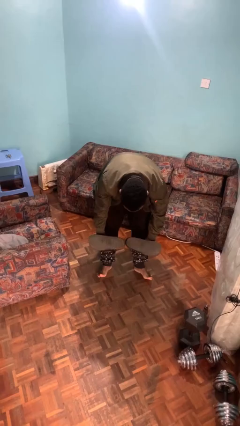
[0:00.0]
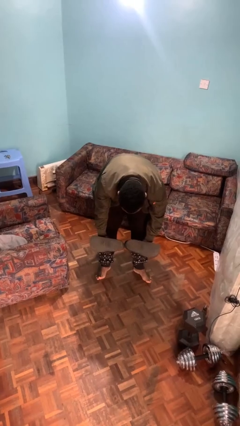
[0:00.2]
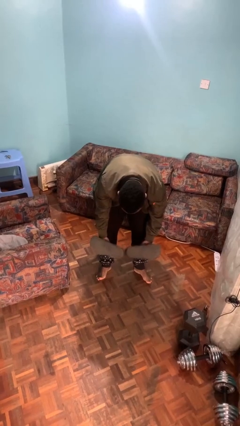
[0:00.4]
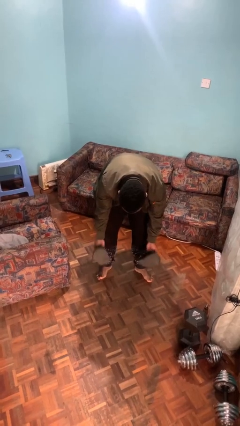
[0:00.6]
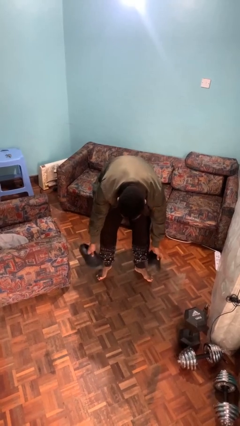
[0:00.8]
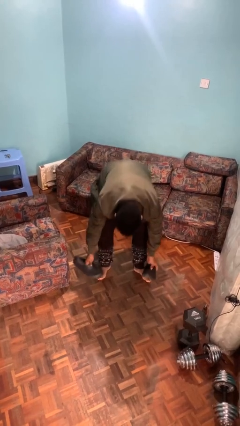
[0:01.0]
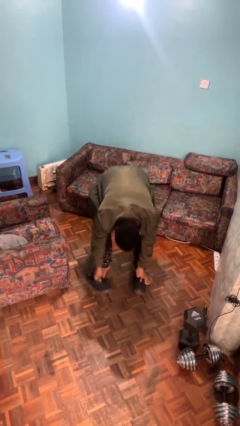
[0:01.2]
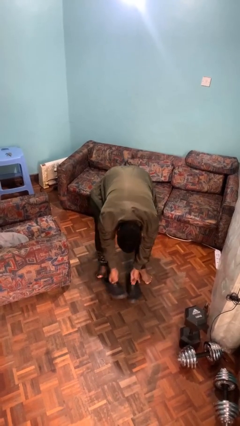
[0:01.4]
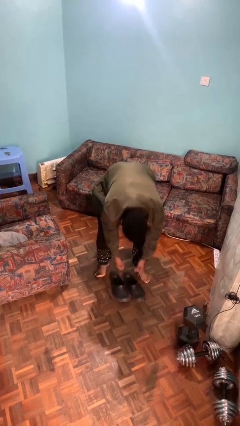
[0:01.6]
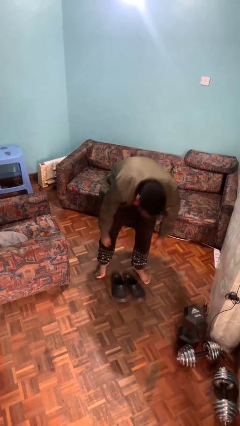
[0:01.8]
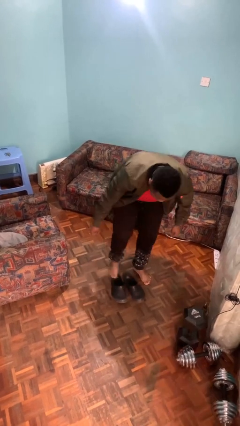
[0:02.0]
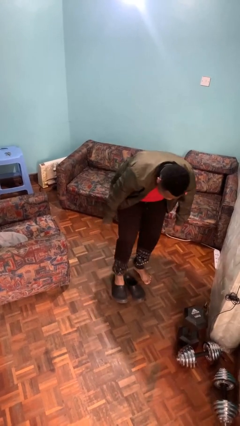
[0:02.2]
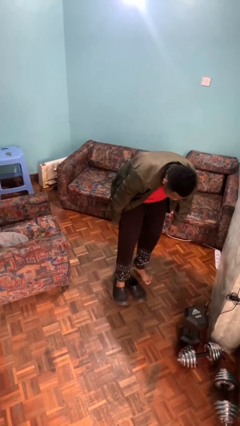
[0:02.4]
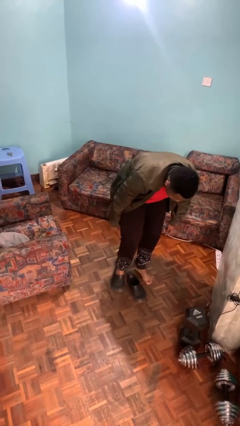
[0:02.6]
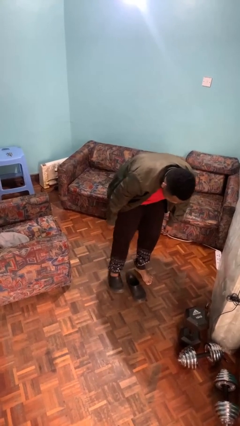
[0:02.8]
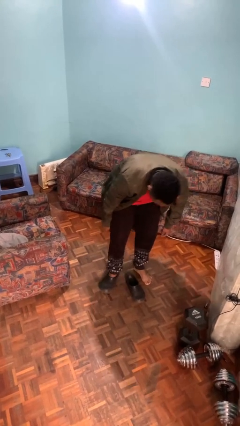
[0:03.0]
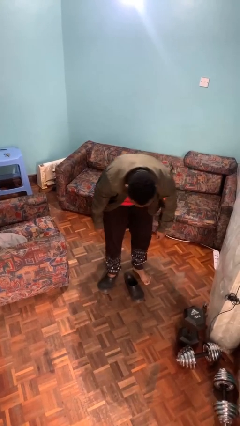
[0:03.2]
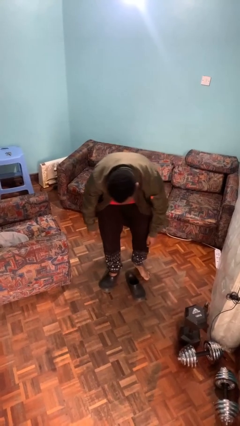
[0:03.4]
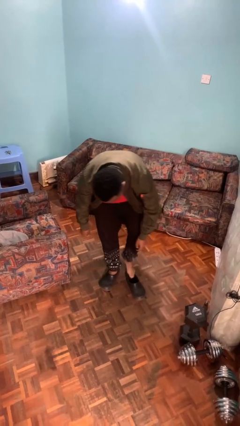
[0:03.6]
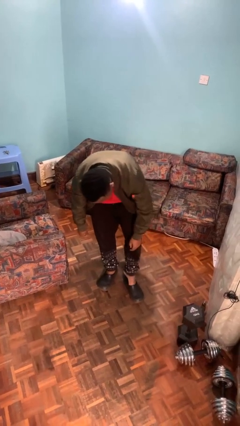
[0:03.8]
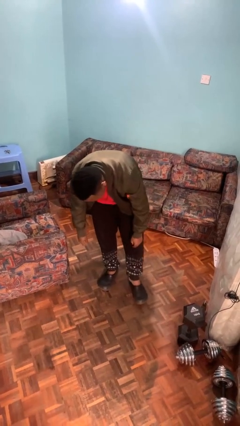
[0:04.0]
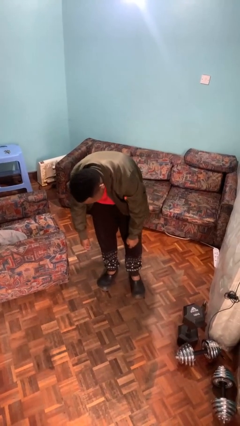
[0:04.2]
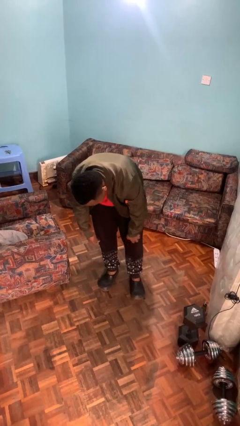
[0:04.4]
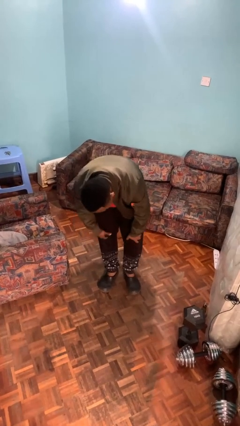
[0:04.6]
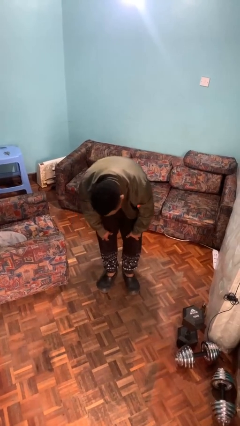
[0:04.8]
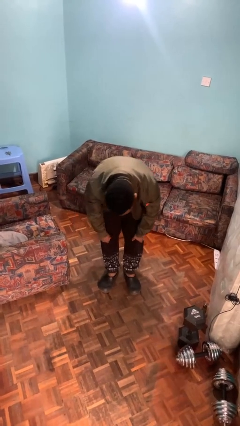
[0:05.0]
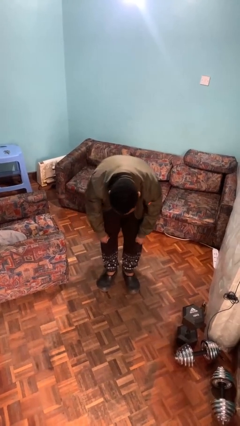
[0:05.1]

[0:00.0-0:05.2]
person puts on shoes

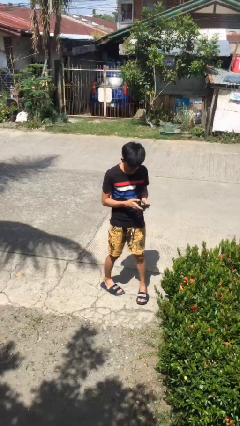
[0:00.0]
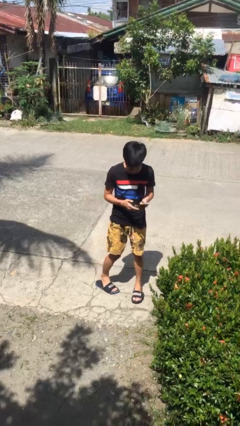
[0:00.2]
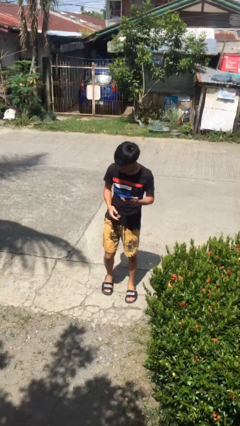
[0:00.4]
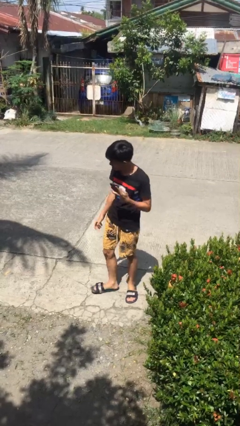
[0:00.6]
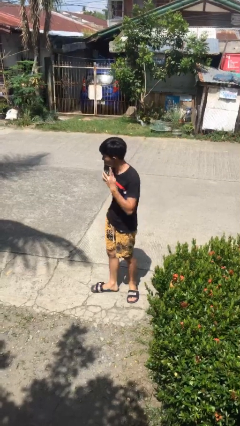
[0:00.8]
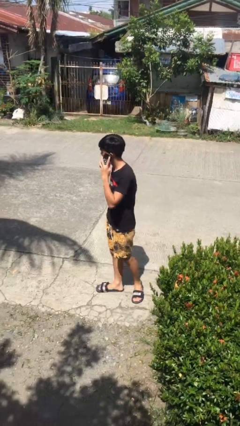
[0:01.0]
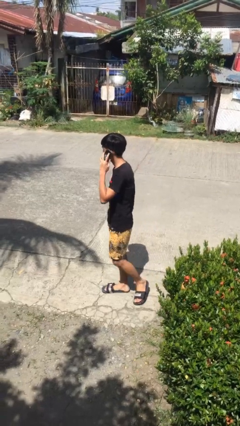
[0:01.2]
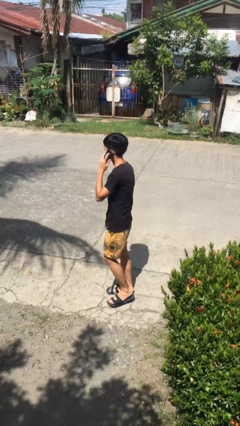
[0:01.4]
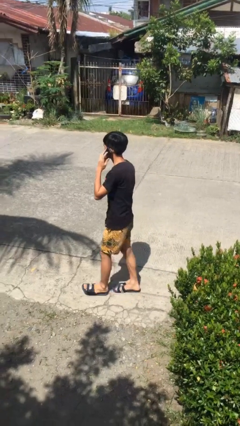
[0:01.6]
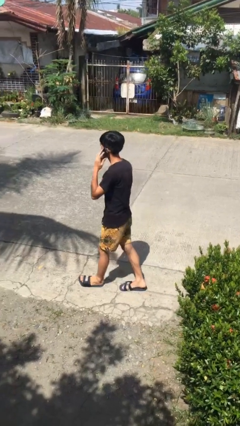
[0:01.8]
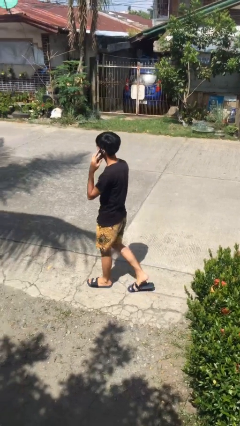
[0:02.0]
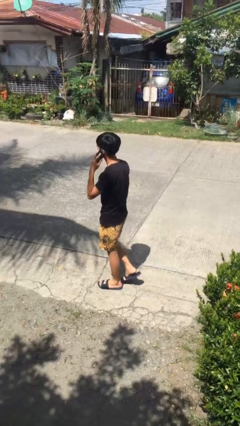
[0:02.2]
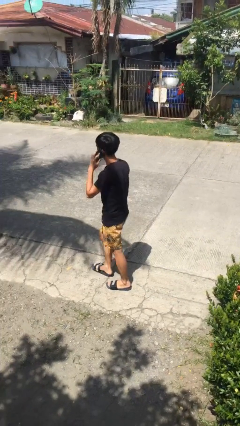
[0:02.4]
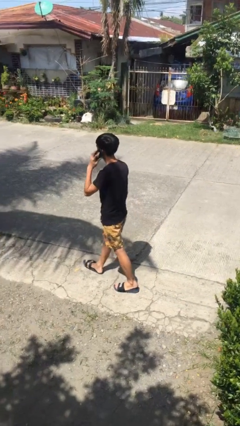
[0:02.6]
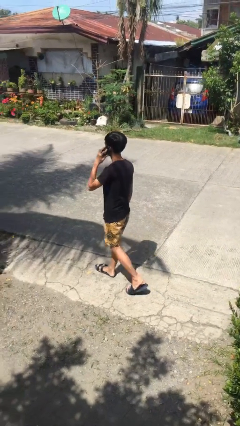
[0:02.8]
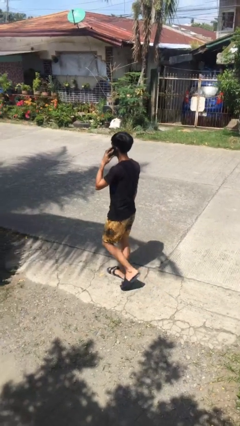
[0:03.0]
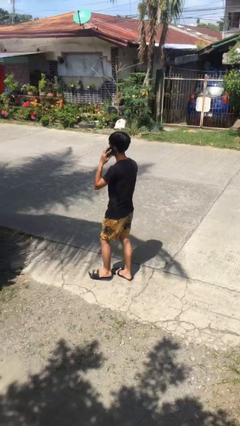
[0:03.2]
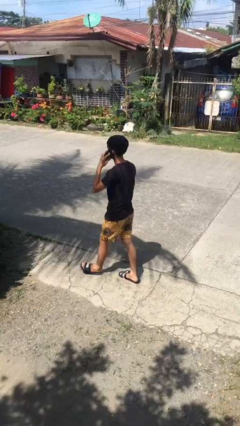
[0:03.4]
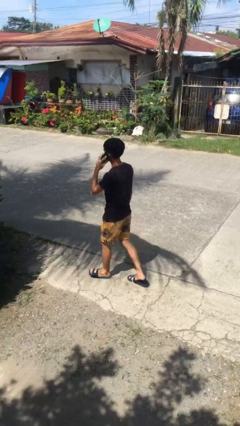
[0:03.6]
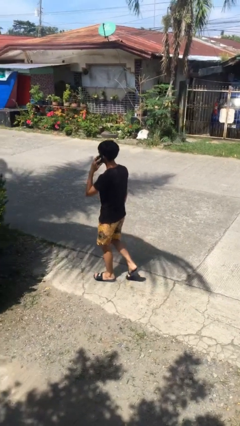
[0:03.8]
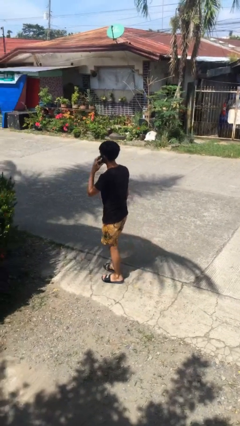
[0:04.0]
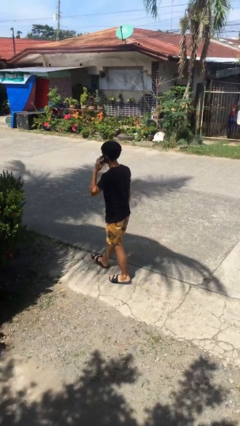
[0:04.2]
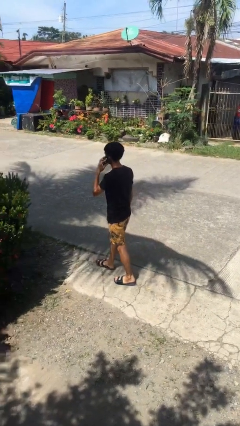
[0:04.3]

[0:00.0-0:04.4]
person talks on phone

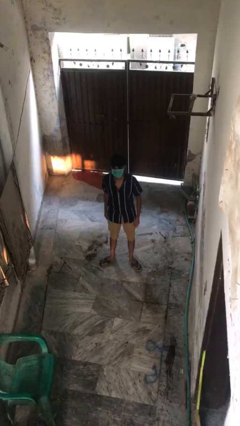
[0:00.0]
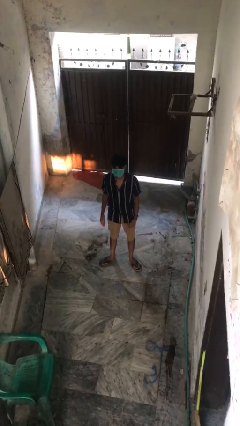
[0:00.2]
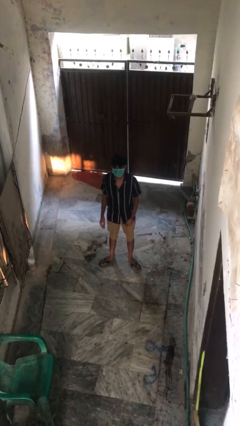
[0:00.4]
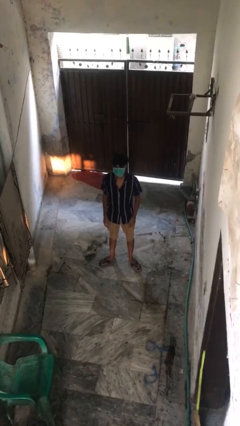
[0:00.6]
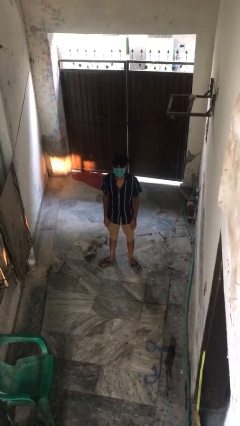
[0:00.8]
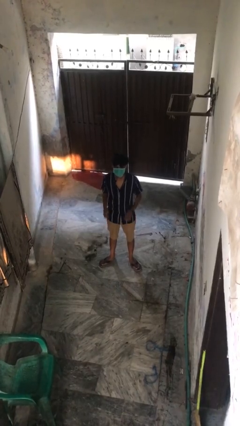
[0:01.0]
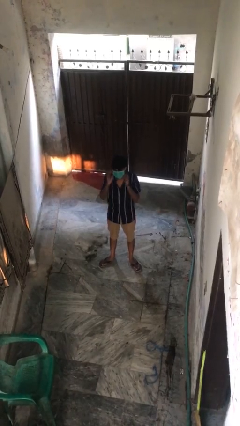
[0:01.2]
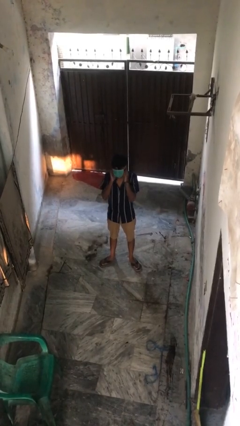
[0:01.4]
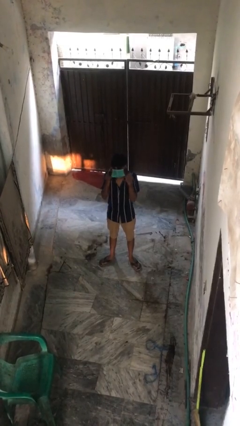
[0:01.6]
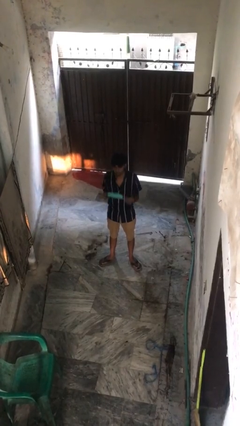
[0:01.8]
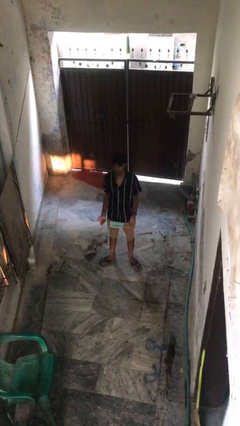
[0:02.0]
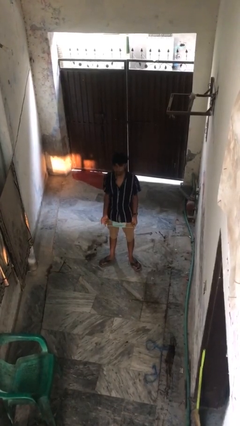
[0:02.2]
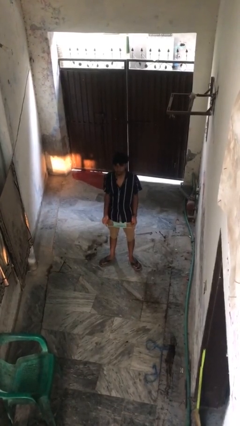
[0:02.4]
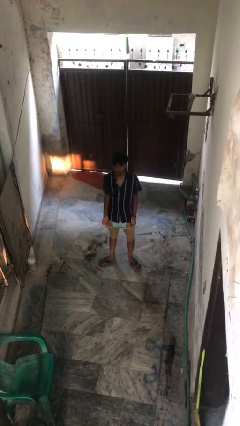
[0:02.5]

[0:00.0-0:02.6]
person takes off facemask

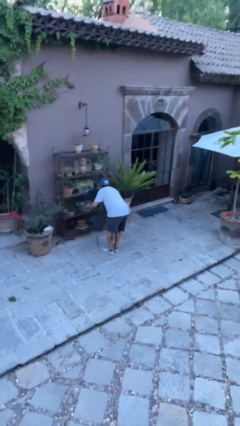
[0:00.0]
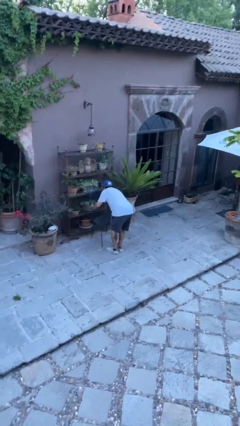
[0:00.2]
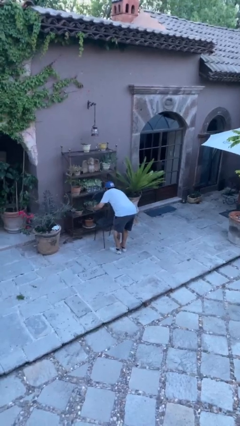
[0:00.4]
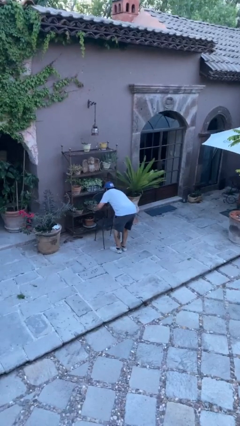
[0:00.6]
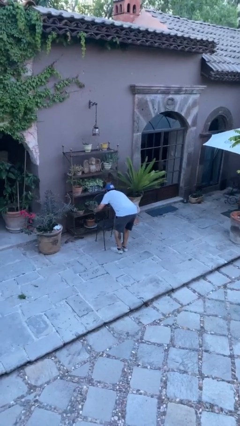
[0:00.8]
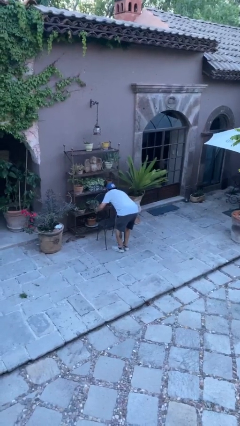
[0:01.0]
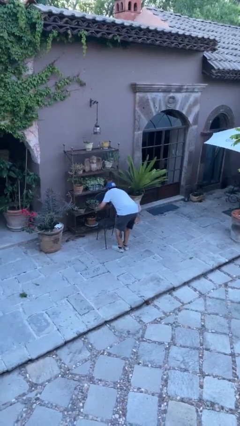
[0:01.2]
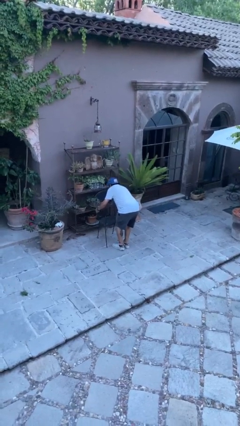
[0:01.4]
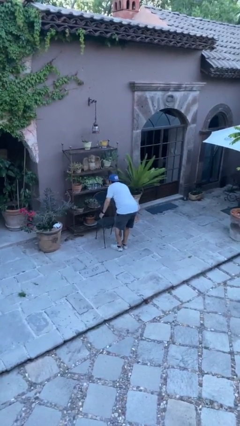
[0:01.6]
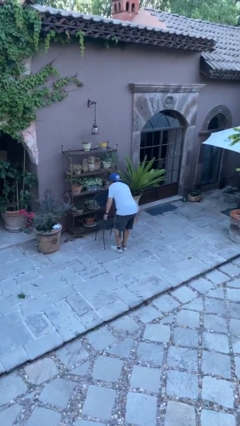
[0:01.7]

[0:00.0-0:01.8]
person puts down object on floor

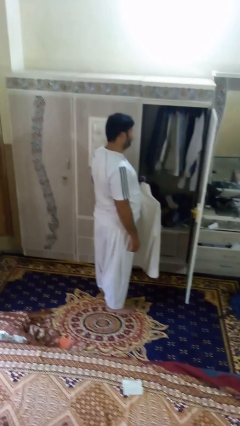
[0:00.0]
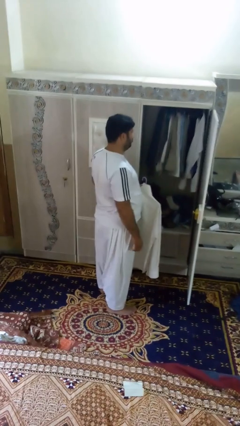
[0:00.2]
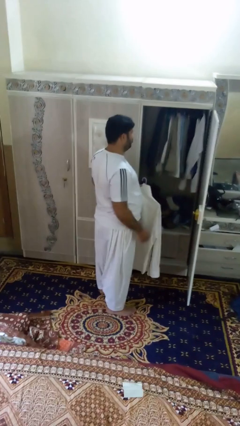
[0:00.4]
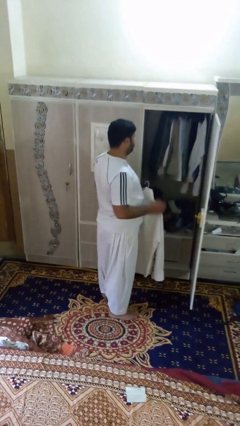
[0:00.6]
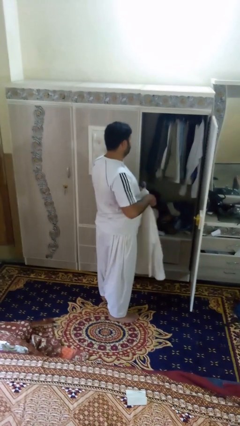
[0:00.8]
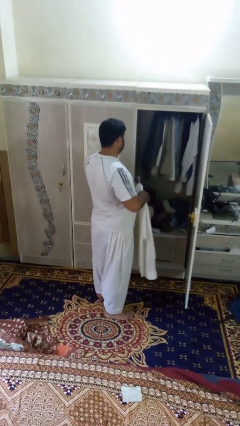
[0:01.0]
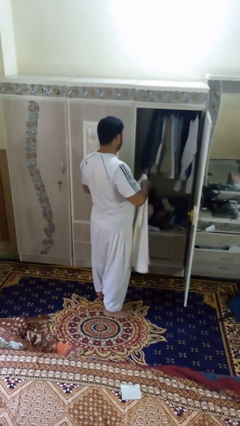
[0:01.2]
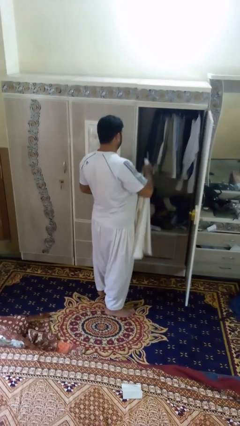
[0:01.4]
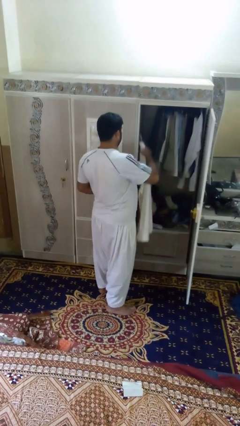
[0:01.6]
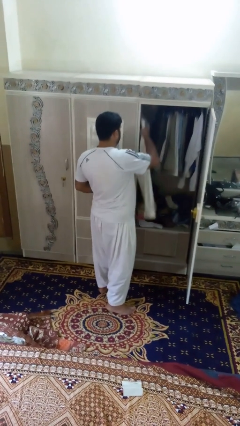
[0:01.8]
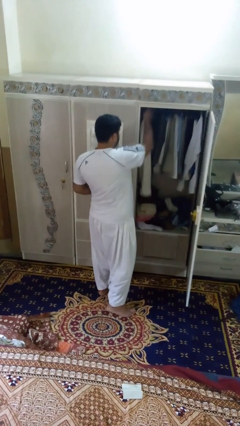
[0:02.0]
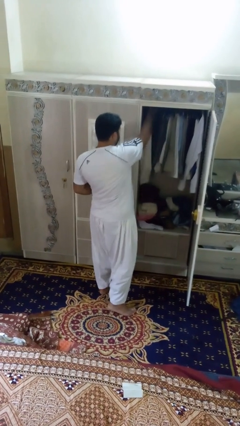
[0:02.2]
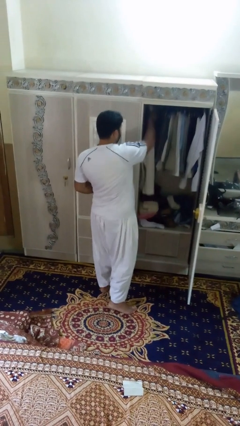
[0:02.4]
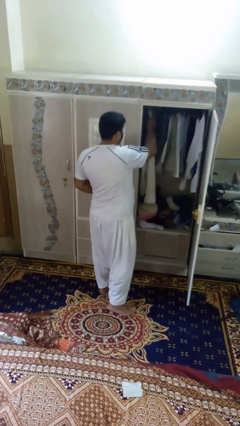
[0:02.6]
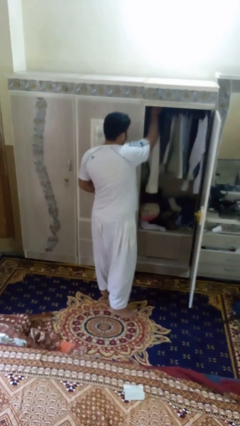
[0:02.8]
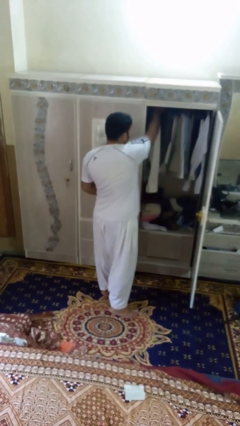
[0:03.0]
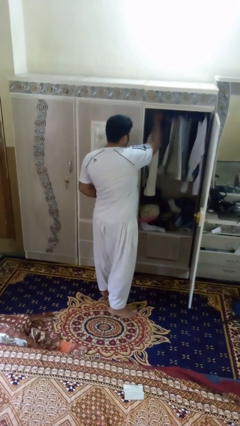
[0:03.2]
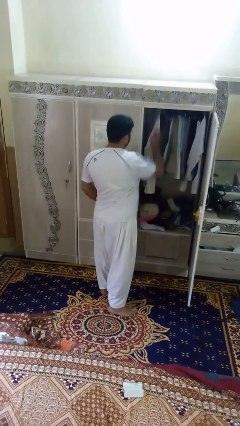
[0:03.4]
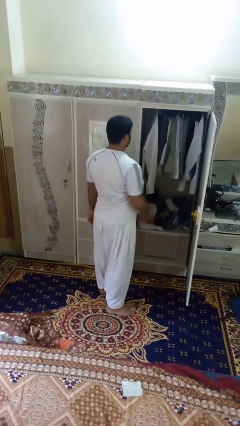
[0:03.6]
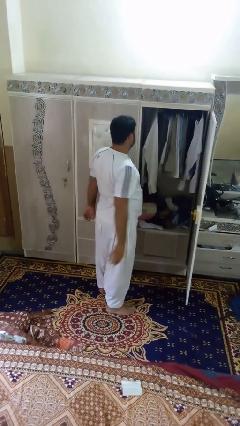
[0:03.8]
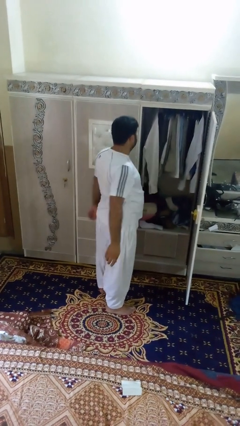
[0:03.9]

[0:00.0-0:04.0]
person puts clothes into closet
